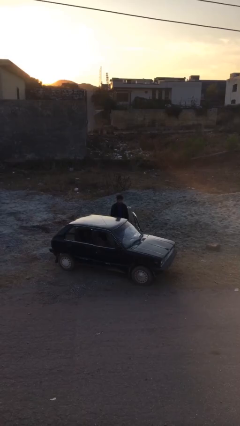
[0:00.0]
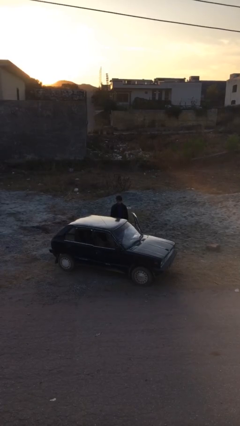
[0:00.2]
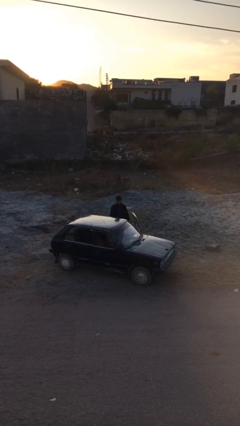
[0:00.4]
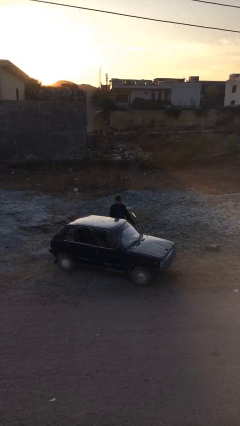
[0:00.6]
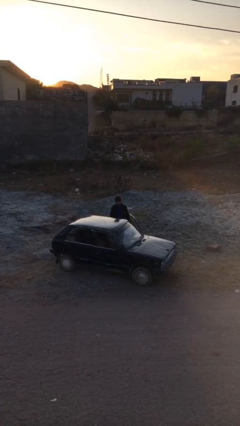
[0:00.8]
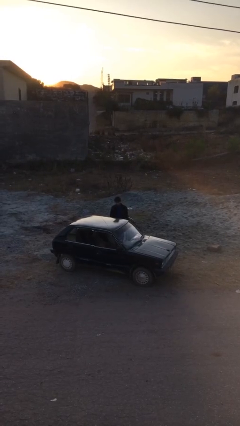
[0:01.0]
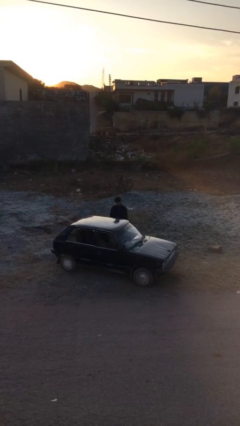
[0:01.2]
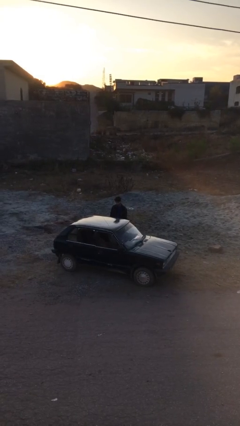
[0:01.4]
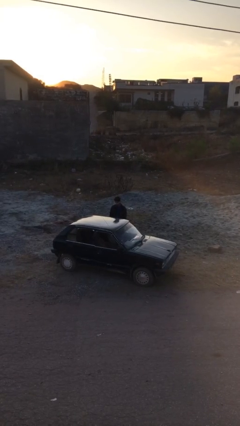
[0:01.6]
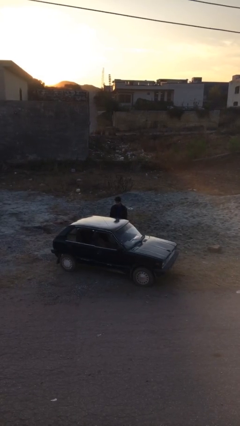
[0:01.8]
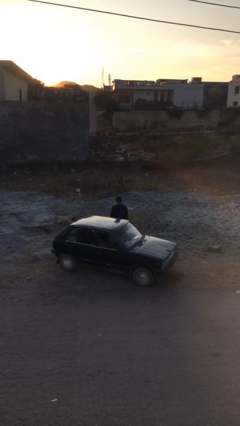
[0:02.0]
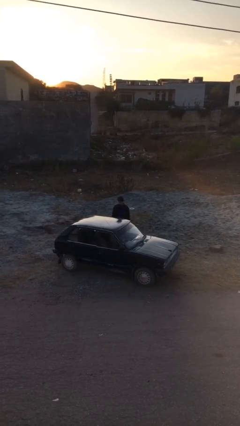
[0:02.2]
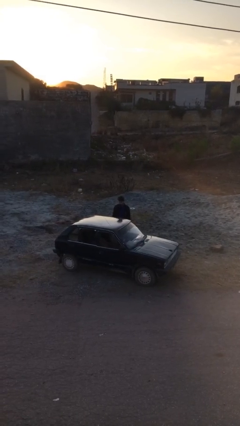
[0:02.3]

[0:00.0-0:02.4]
person closes car door

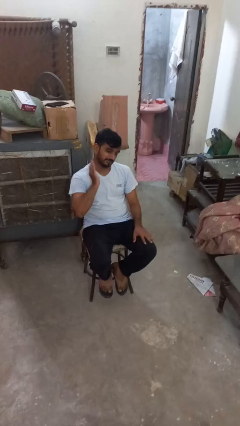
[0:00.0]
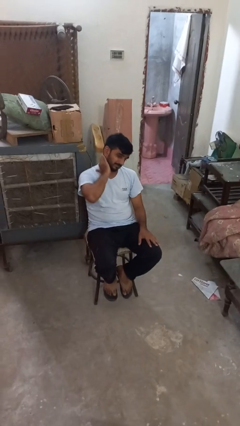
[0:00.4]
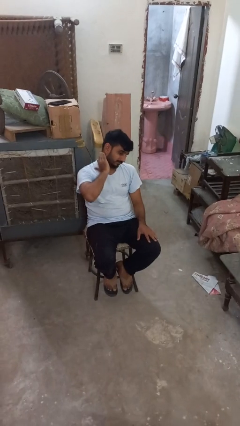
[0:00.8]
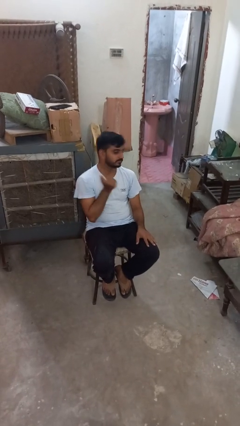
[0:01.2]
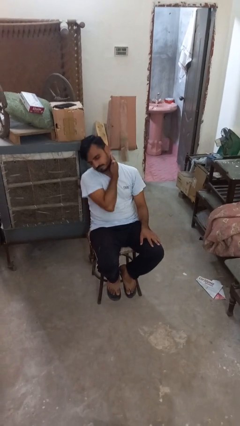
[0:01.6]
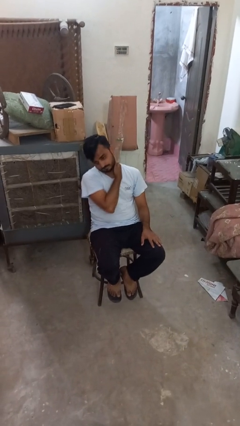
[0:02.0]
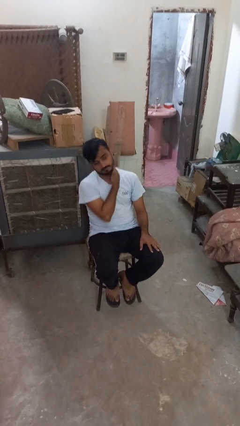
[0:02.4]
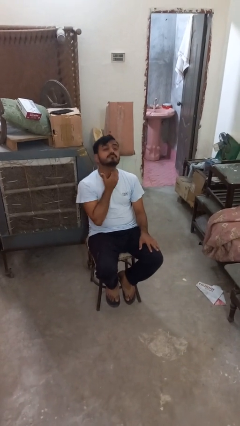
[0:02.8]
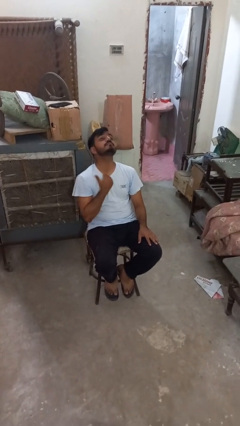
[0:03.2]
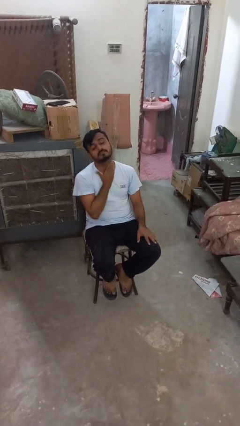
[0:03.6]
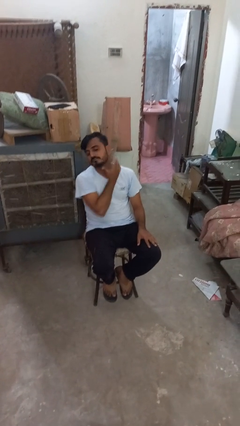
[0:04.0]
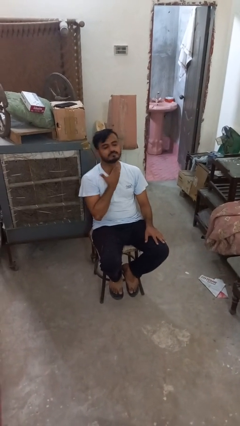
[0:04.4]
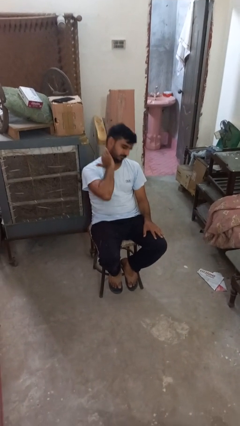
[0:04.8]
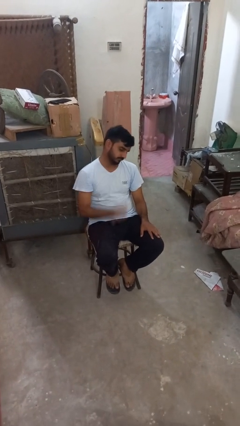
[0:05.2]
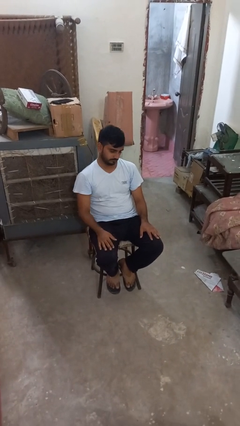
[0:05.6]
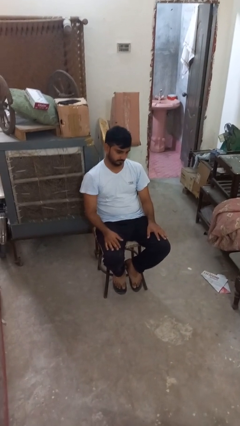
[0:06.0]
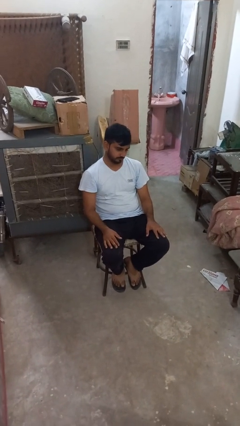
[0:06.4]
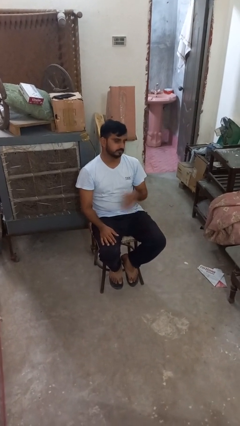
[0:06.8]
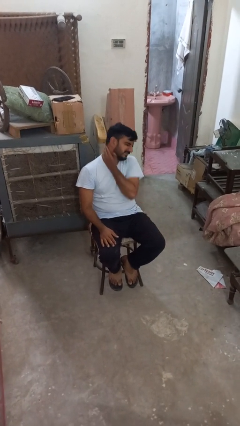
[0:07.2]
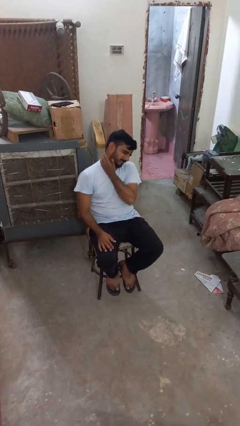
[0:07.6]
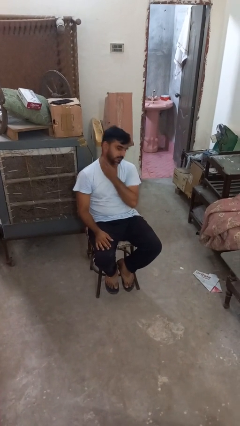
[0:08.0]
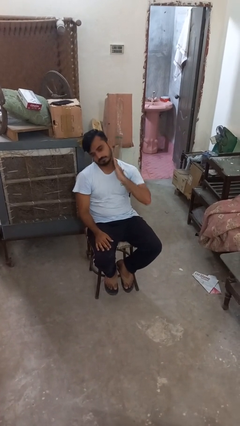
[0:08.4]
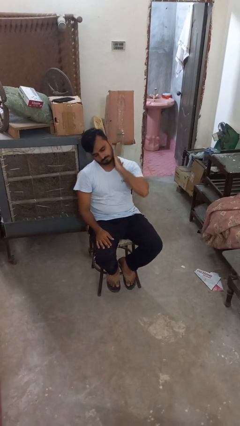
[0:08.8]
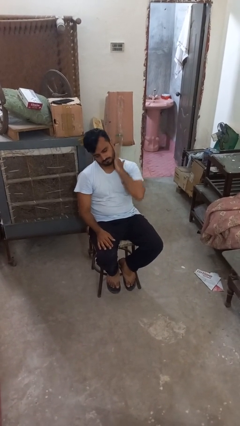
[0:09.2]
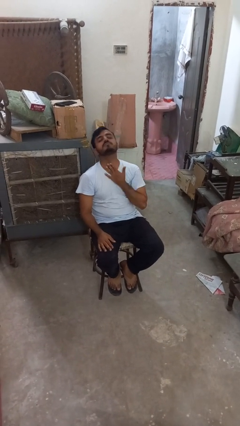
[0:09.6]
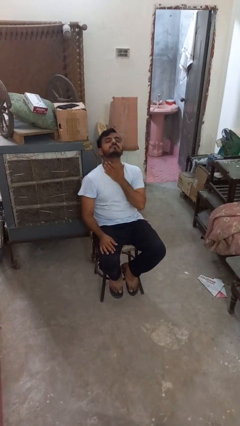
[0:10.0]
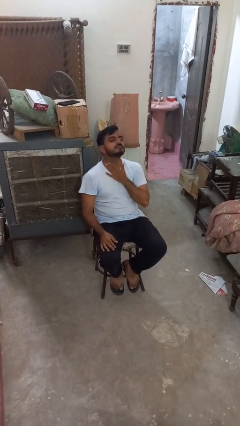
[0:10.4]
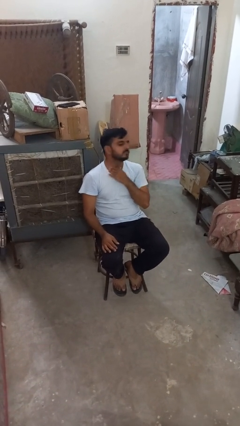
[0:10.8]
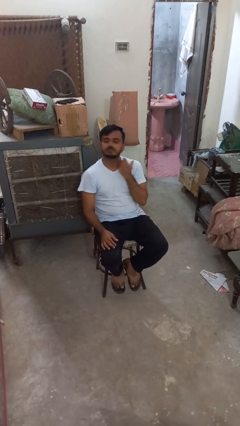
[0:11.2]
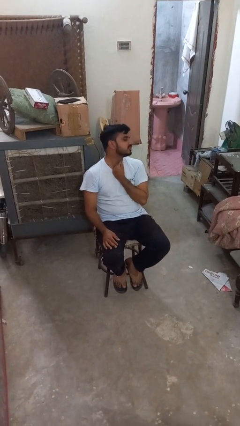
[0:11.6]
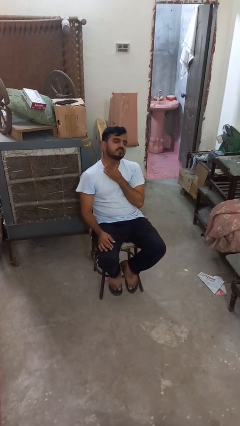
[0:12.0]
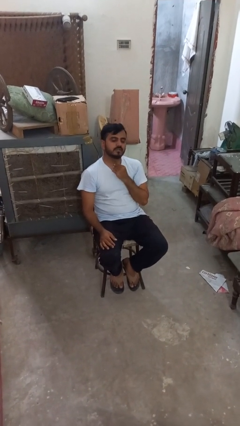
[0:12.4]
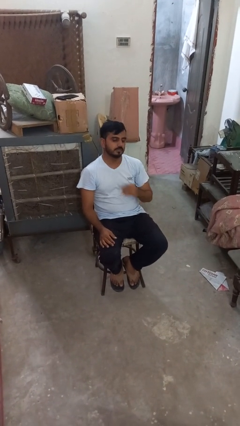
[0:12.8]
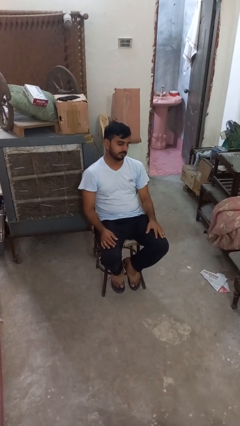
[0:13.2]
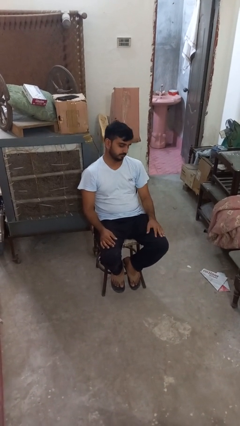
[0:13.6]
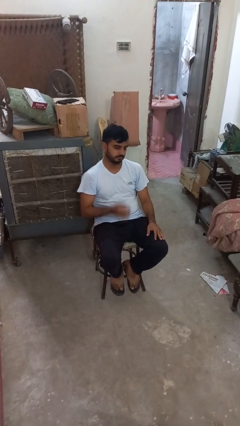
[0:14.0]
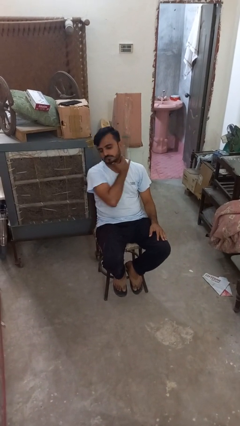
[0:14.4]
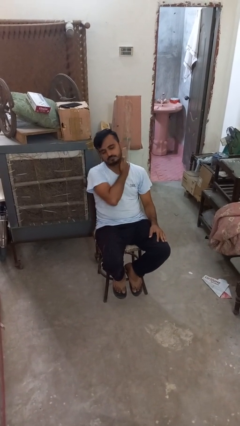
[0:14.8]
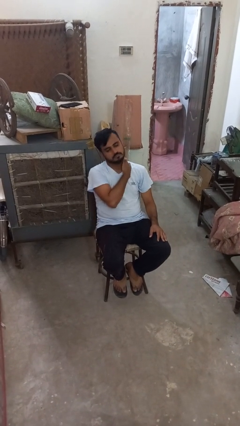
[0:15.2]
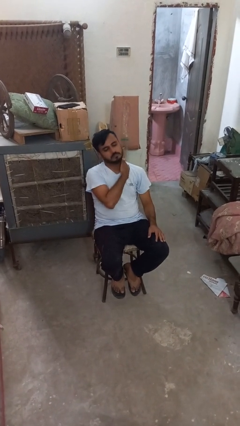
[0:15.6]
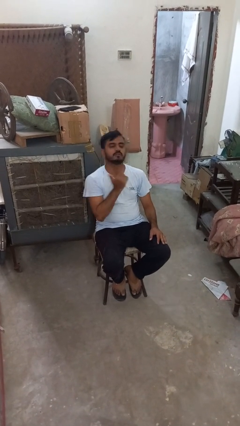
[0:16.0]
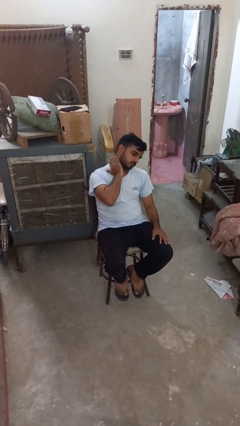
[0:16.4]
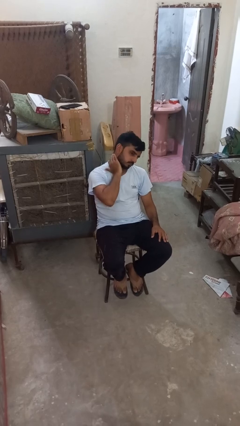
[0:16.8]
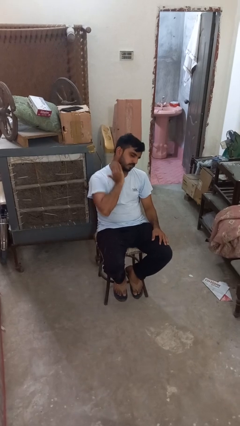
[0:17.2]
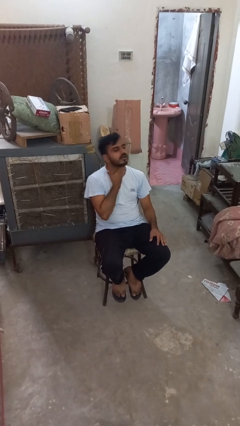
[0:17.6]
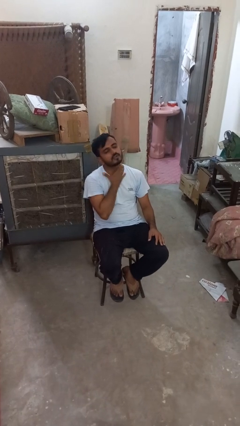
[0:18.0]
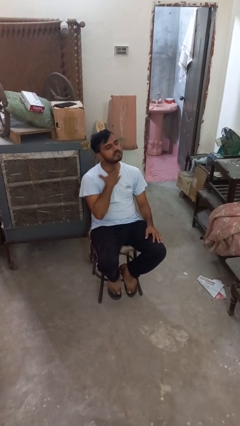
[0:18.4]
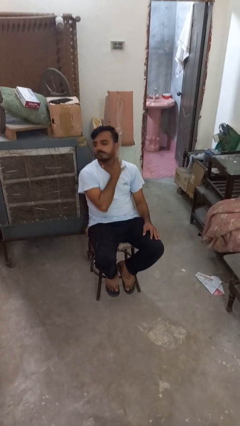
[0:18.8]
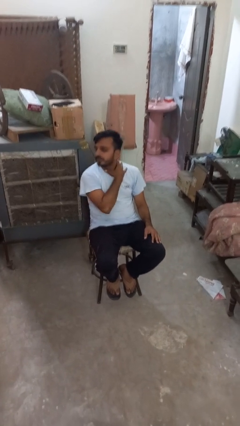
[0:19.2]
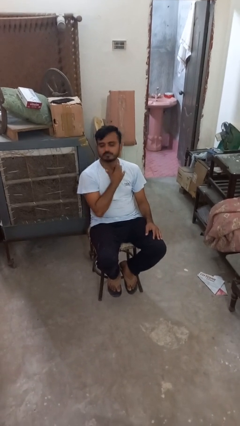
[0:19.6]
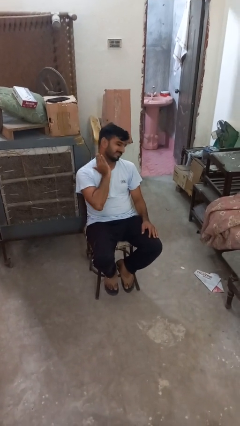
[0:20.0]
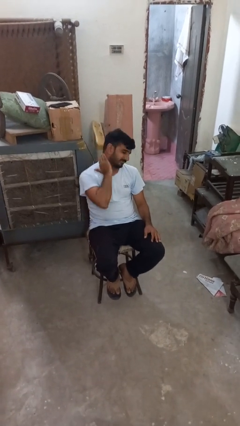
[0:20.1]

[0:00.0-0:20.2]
person rubs neck

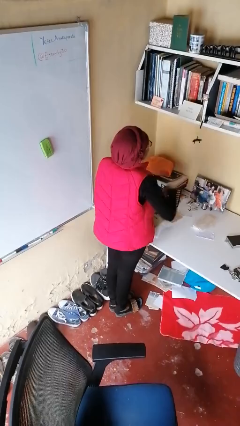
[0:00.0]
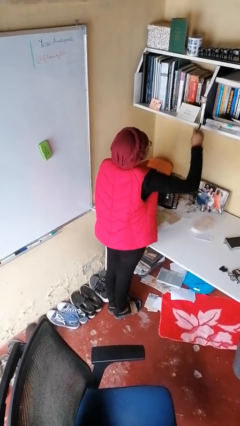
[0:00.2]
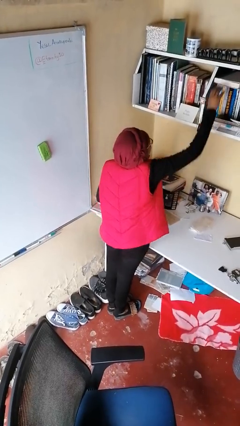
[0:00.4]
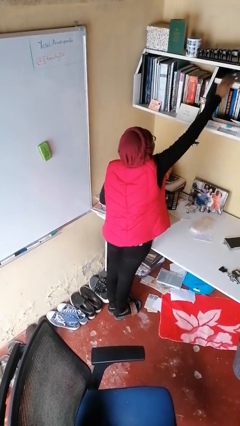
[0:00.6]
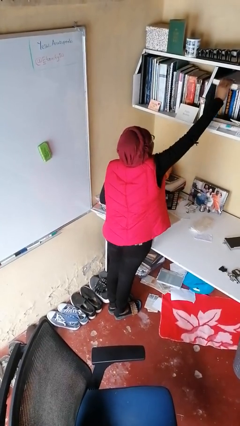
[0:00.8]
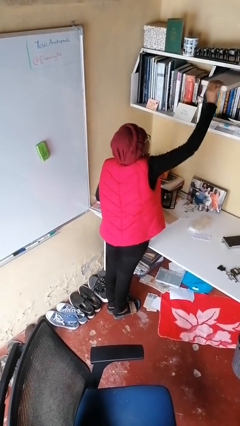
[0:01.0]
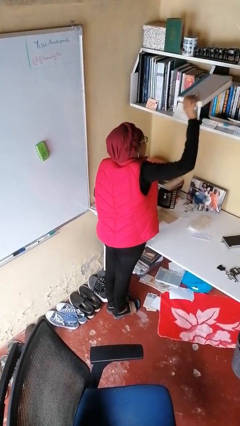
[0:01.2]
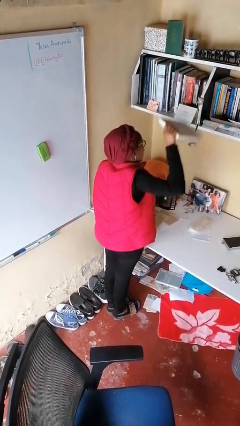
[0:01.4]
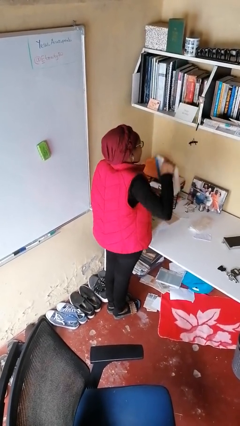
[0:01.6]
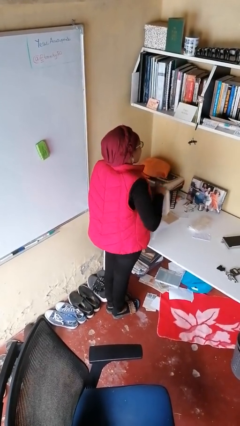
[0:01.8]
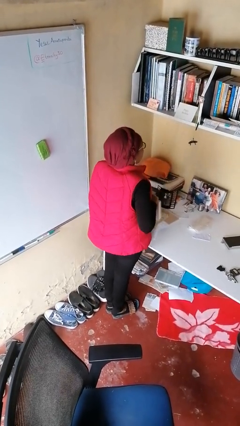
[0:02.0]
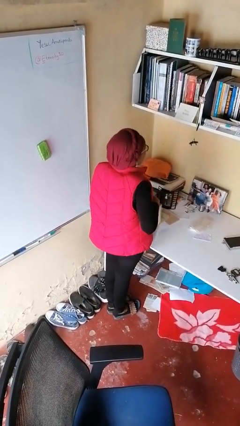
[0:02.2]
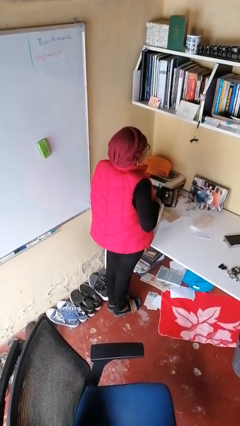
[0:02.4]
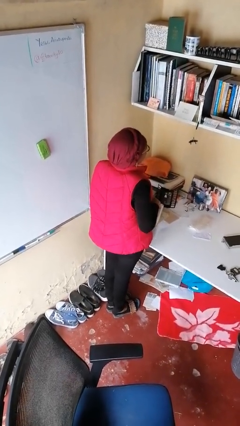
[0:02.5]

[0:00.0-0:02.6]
person picks up object from shelf

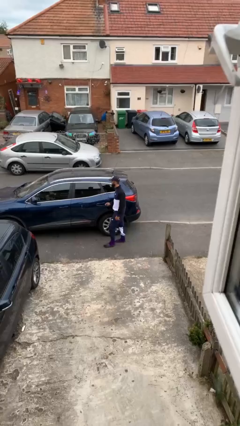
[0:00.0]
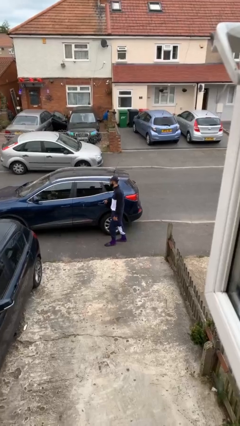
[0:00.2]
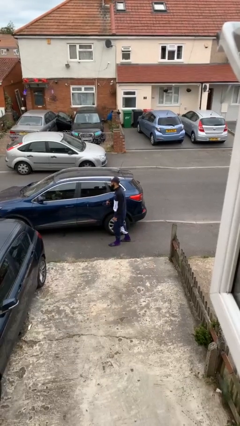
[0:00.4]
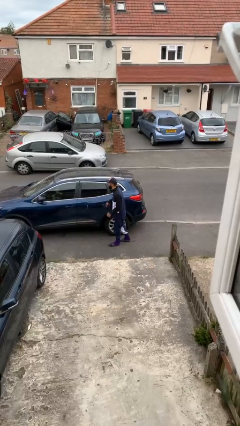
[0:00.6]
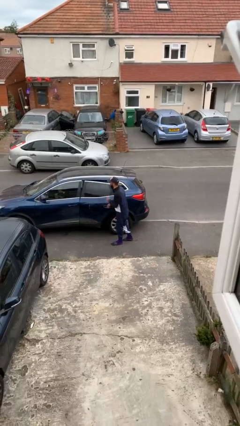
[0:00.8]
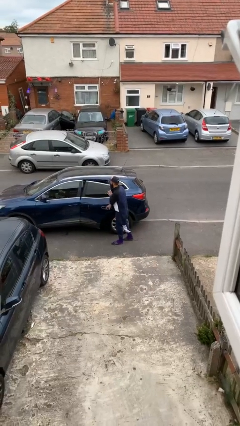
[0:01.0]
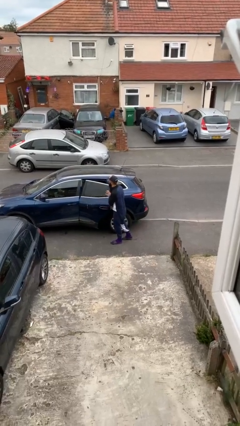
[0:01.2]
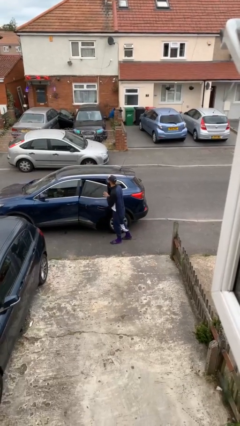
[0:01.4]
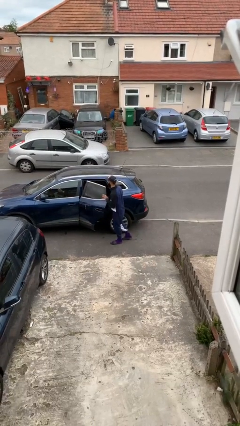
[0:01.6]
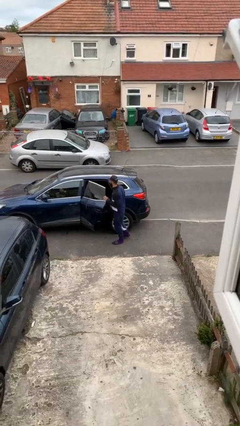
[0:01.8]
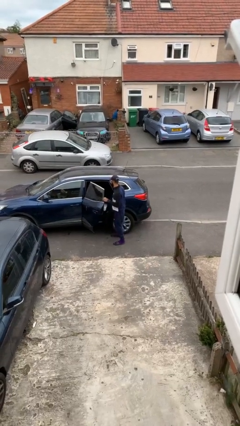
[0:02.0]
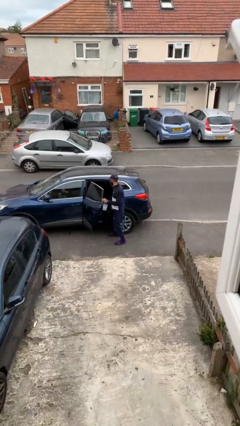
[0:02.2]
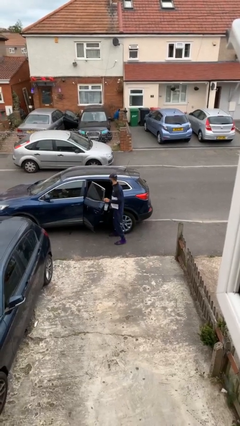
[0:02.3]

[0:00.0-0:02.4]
person opens car door

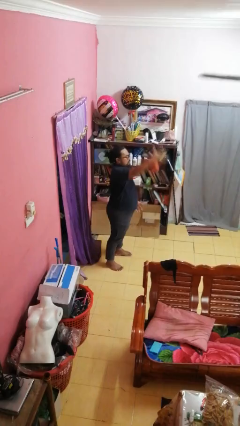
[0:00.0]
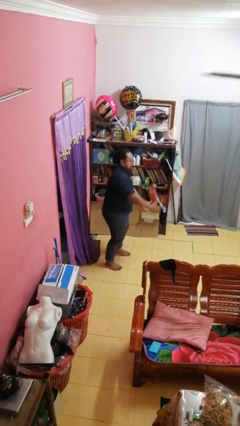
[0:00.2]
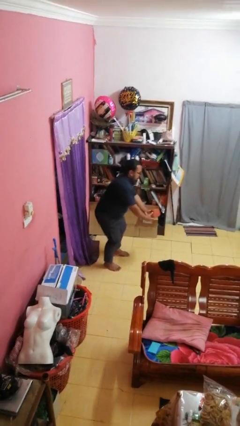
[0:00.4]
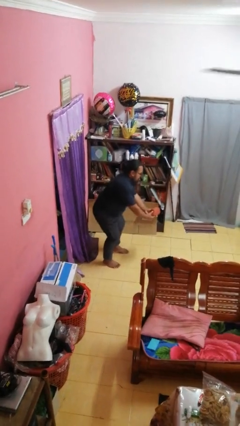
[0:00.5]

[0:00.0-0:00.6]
person drops object
